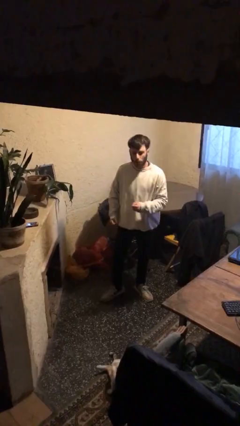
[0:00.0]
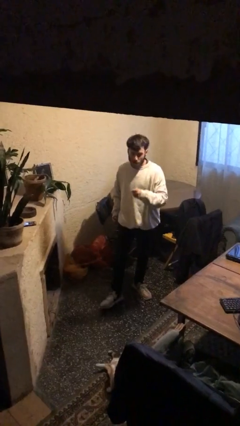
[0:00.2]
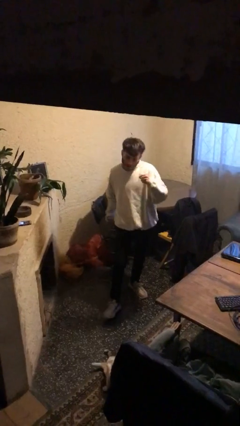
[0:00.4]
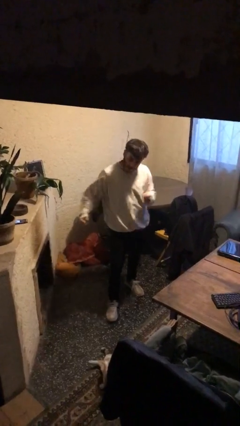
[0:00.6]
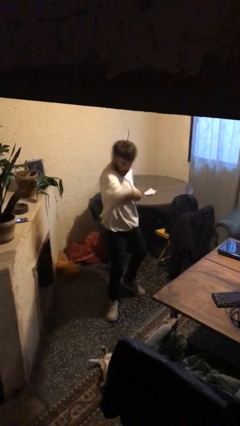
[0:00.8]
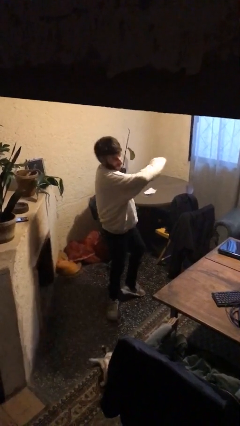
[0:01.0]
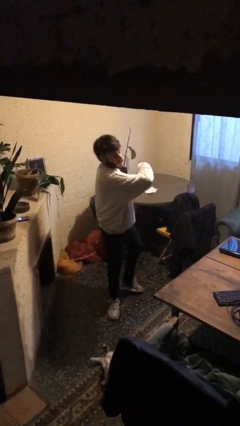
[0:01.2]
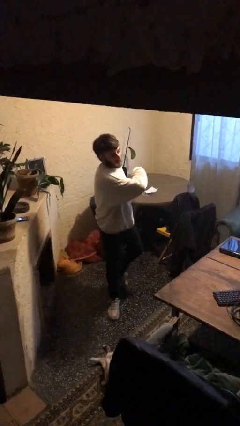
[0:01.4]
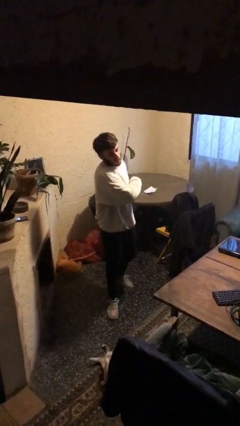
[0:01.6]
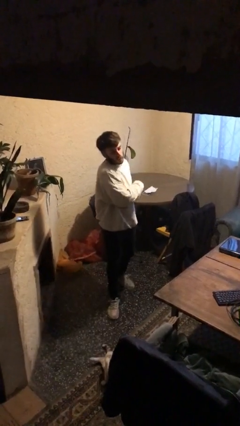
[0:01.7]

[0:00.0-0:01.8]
person punches

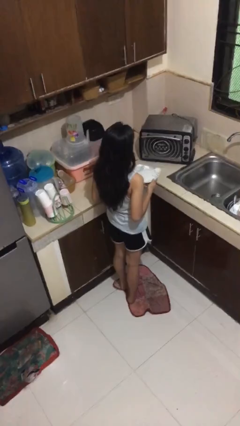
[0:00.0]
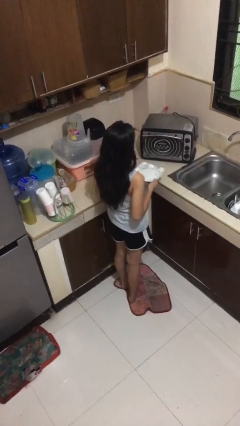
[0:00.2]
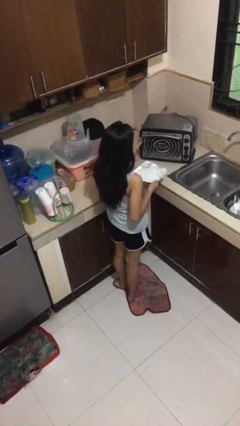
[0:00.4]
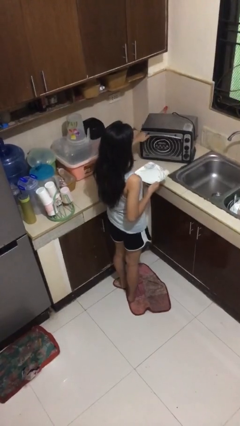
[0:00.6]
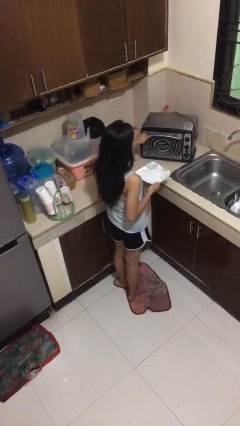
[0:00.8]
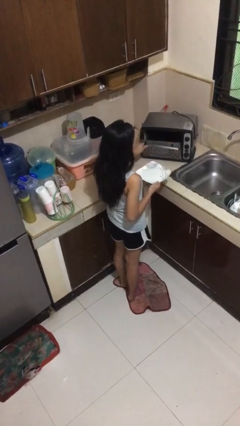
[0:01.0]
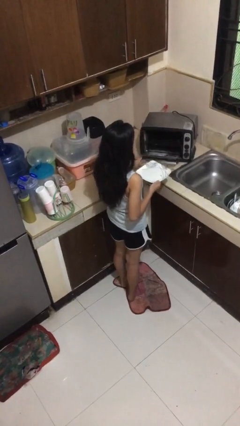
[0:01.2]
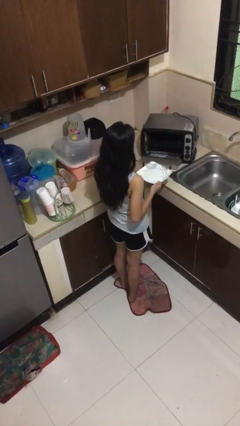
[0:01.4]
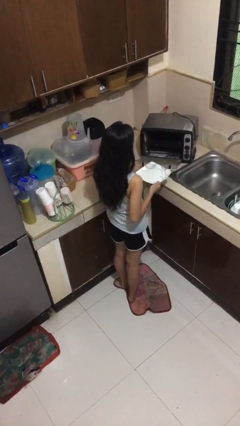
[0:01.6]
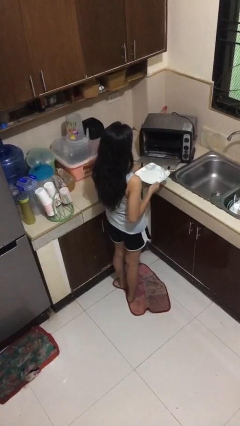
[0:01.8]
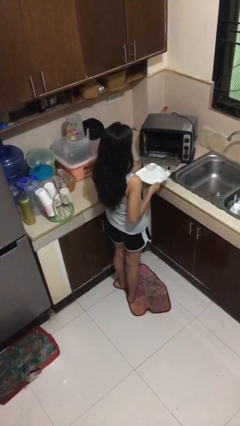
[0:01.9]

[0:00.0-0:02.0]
person opens microwave

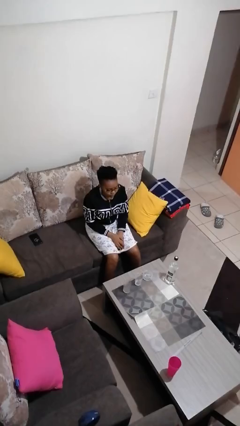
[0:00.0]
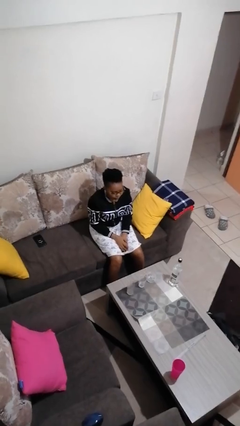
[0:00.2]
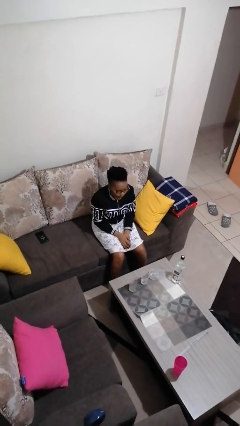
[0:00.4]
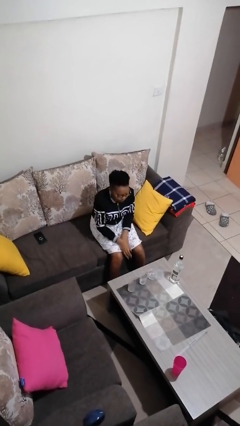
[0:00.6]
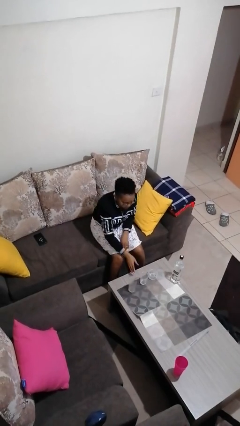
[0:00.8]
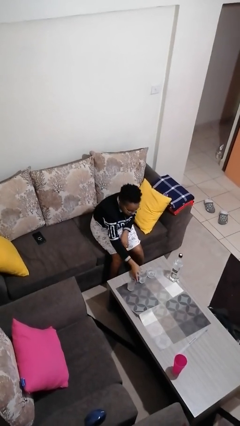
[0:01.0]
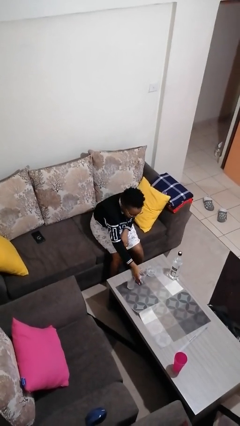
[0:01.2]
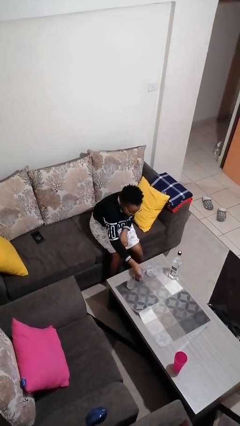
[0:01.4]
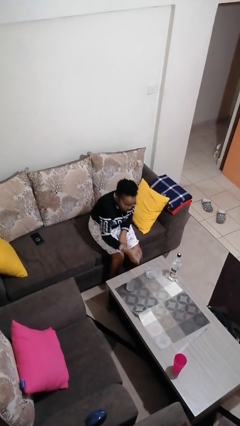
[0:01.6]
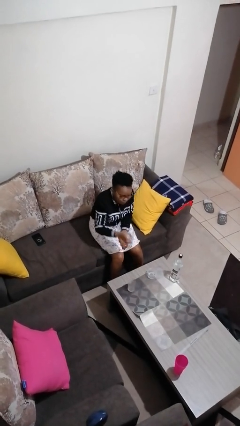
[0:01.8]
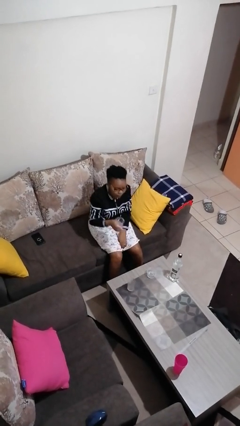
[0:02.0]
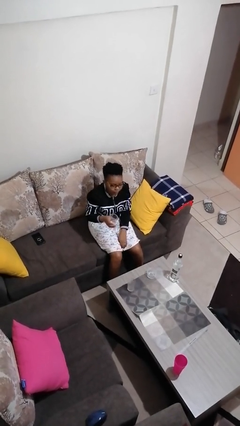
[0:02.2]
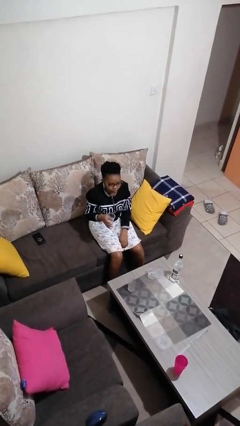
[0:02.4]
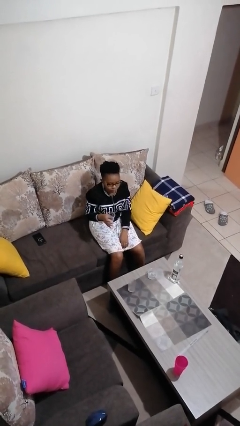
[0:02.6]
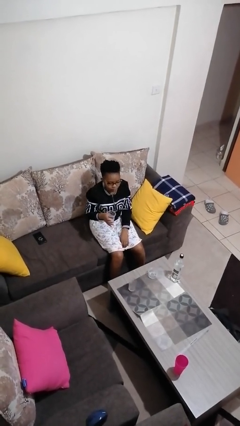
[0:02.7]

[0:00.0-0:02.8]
person picks up object from table

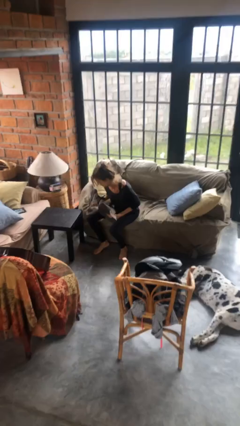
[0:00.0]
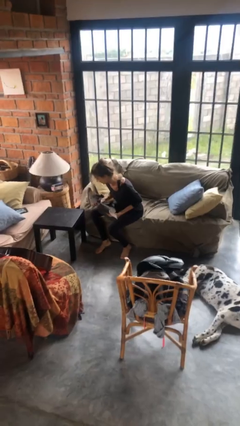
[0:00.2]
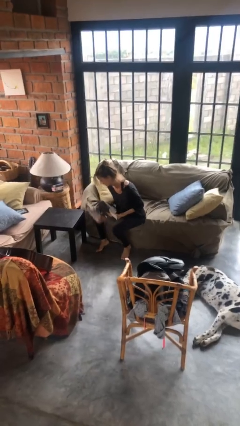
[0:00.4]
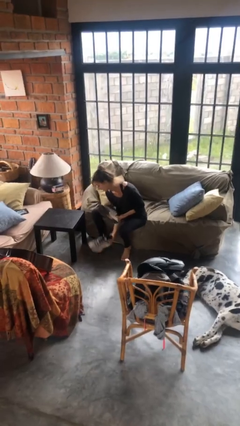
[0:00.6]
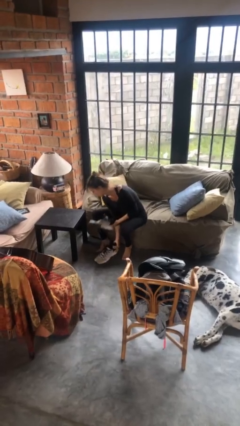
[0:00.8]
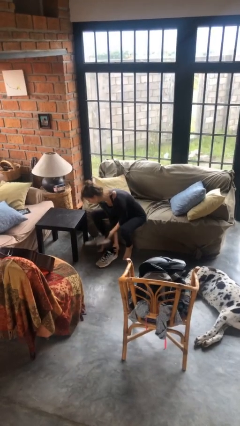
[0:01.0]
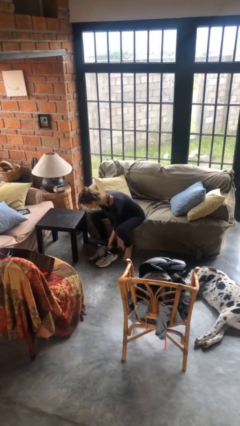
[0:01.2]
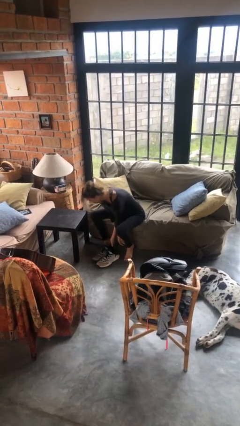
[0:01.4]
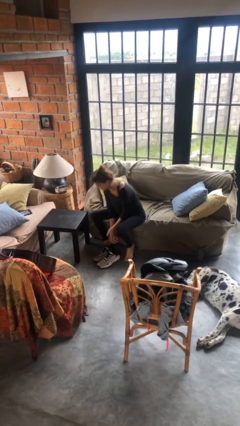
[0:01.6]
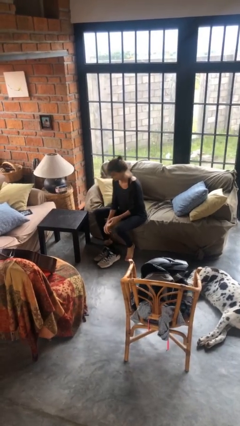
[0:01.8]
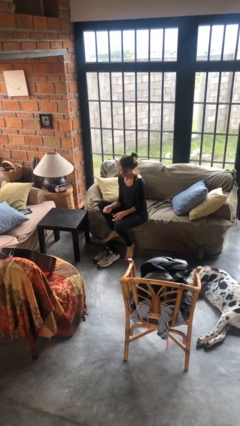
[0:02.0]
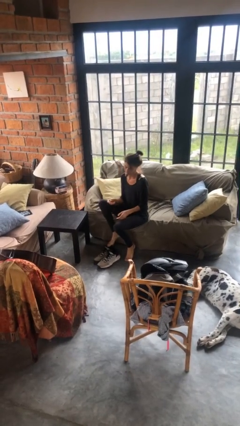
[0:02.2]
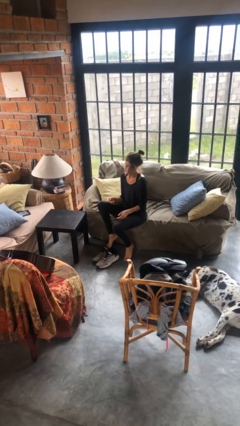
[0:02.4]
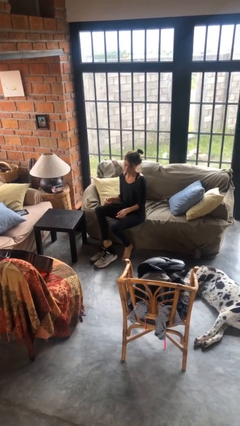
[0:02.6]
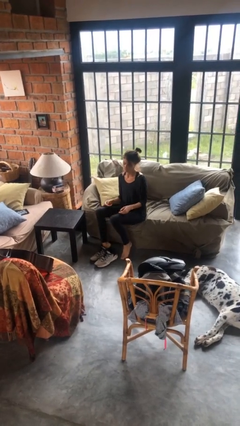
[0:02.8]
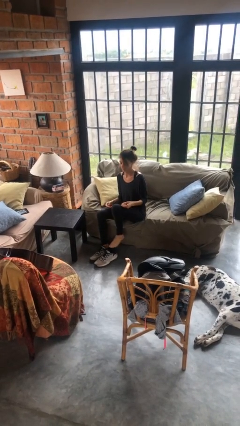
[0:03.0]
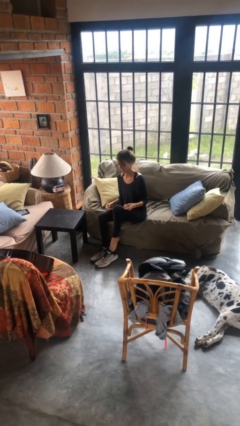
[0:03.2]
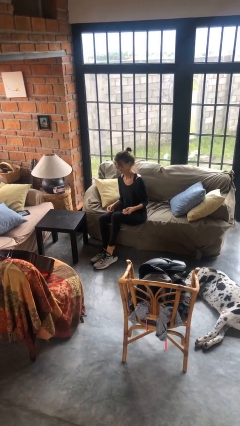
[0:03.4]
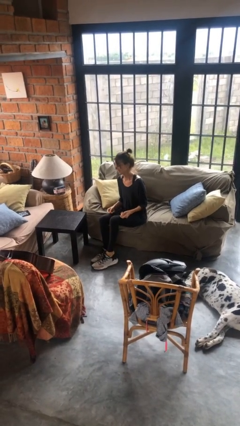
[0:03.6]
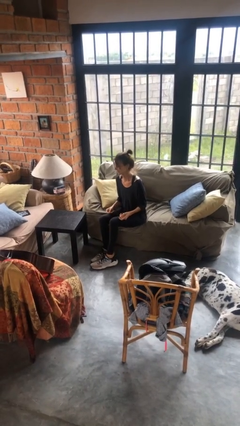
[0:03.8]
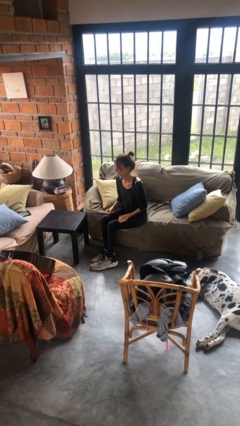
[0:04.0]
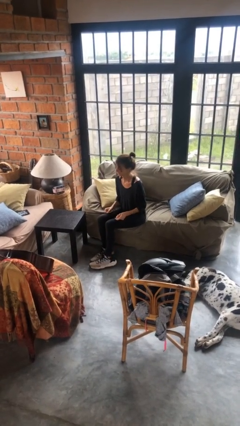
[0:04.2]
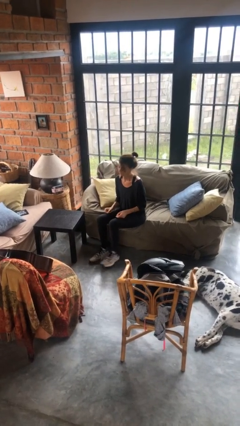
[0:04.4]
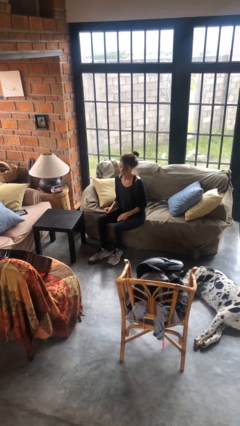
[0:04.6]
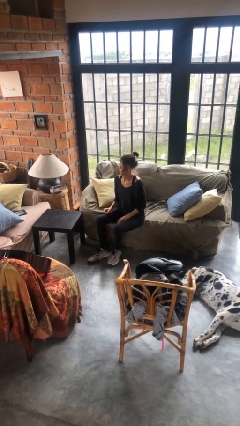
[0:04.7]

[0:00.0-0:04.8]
person puts on shoes

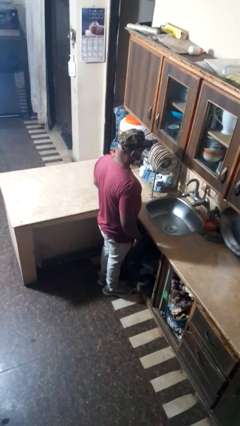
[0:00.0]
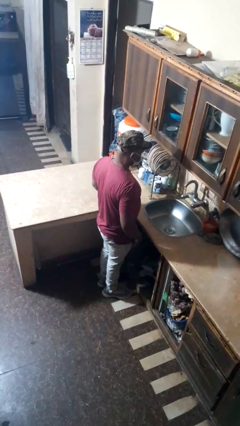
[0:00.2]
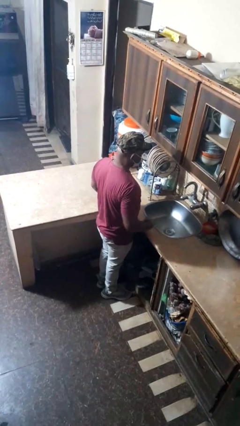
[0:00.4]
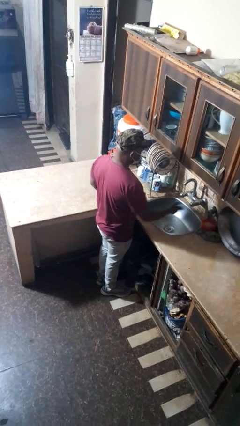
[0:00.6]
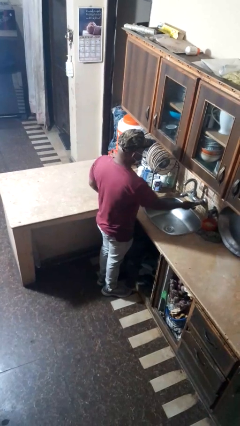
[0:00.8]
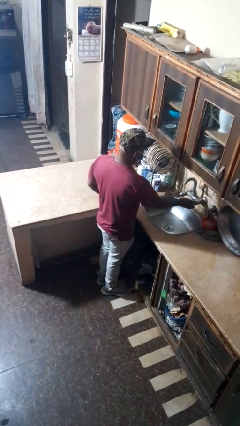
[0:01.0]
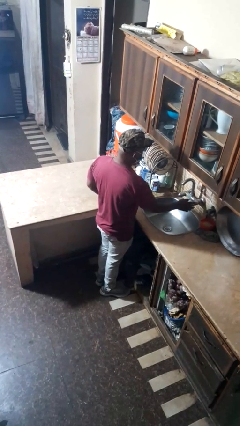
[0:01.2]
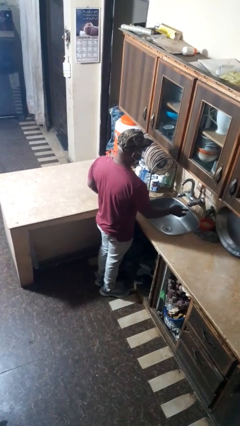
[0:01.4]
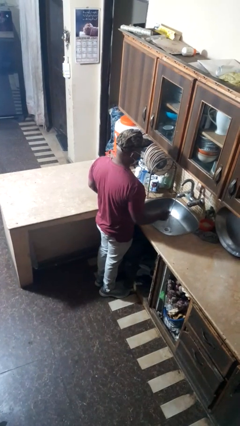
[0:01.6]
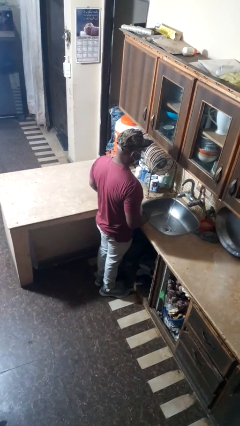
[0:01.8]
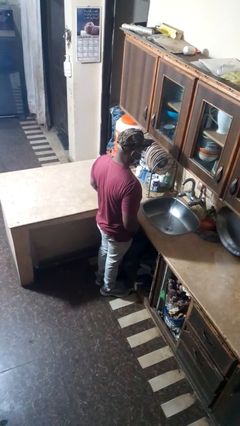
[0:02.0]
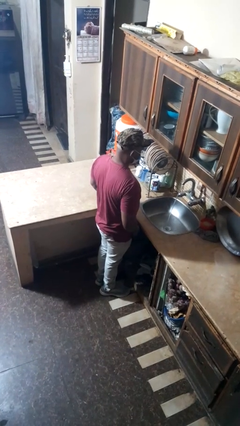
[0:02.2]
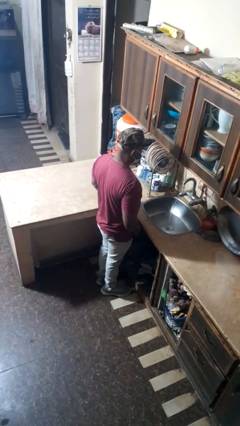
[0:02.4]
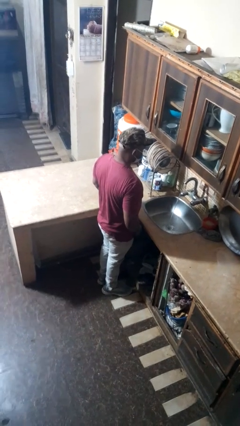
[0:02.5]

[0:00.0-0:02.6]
person turns on faucet

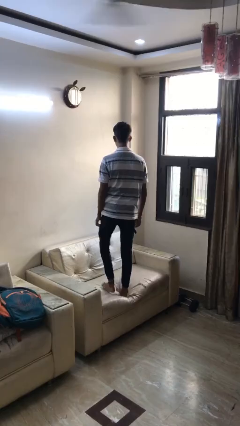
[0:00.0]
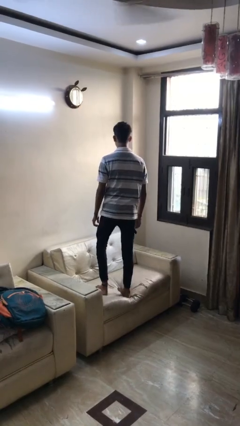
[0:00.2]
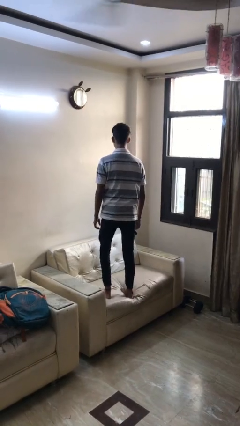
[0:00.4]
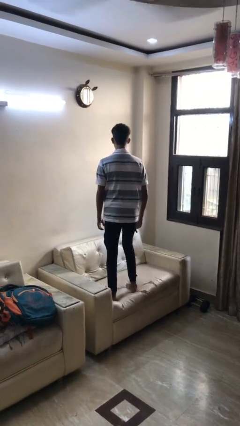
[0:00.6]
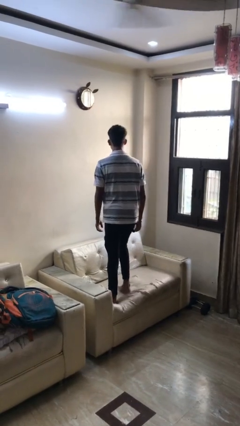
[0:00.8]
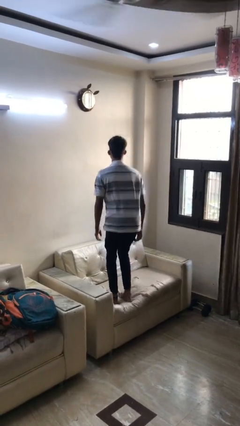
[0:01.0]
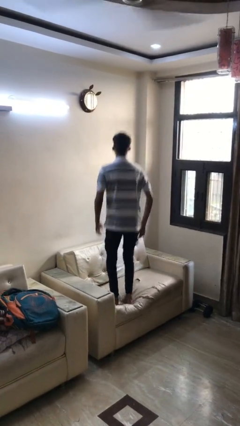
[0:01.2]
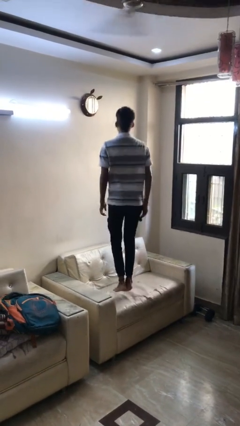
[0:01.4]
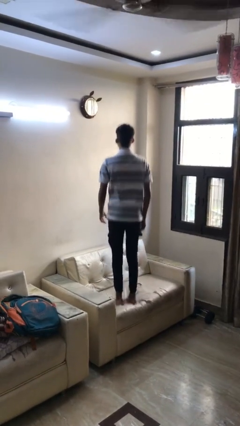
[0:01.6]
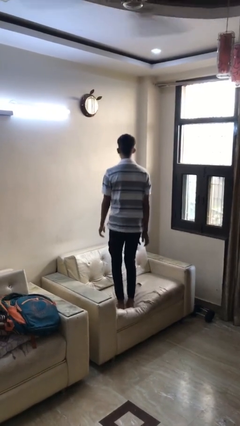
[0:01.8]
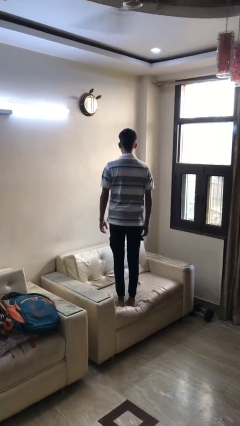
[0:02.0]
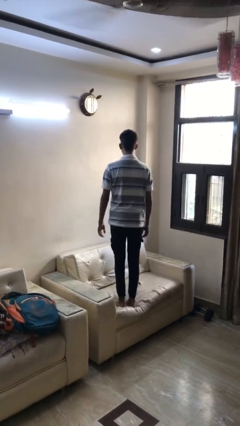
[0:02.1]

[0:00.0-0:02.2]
person jumps on couch

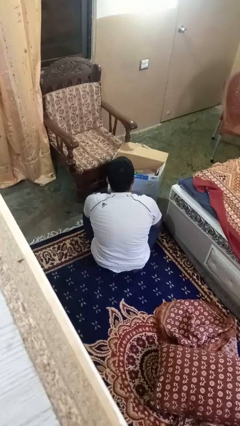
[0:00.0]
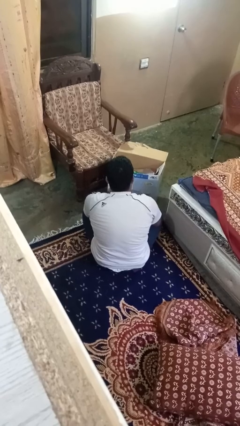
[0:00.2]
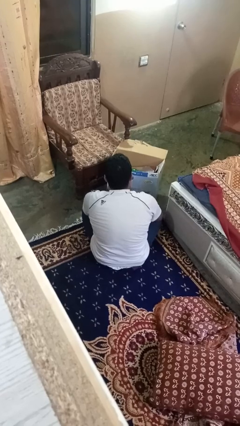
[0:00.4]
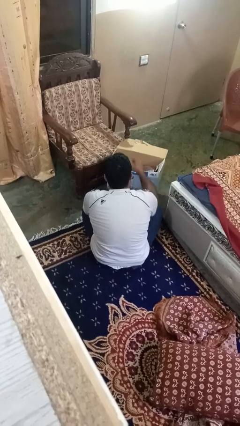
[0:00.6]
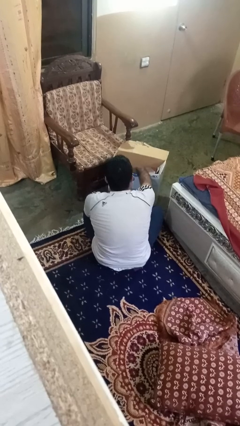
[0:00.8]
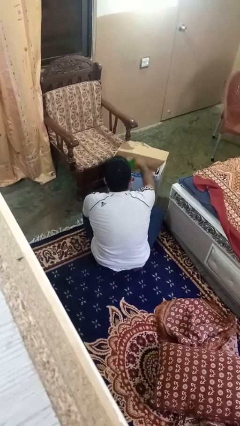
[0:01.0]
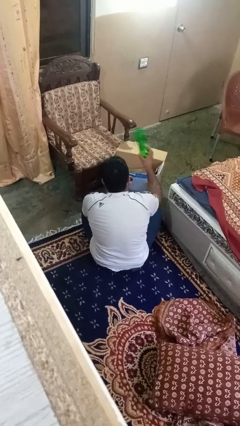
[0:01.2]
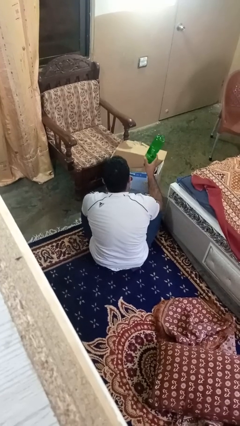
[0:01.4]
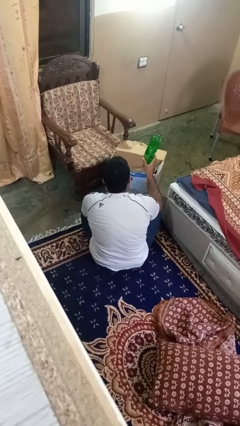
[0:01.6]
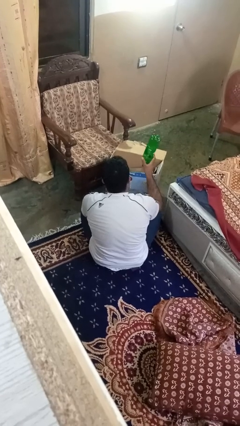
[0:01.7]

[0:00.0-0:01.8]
person takes object from box
